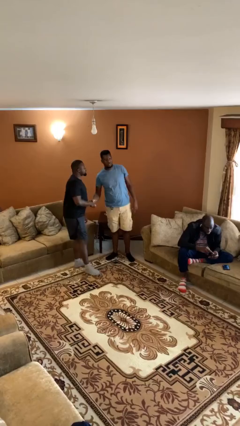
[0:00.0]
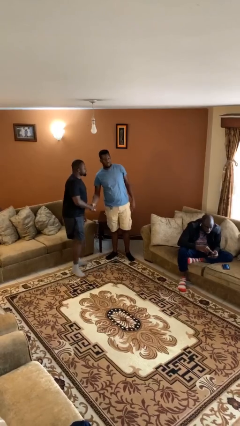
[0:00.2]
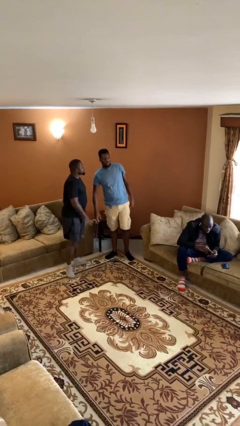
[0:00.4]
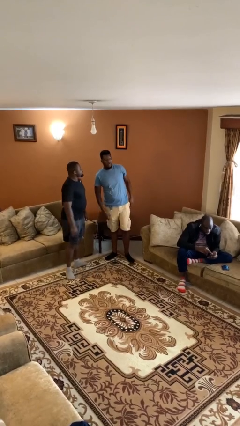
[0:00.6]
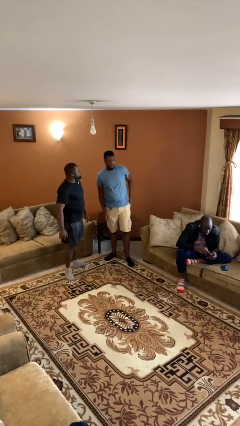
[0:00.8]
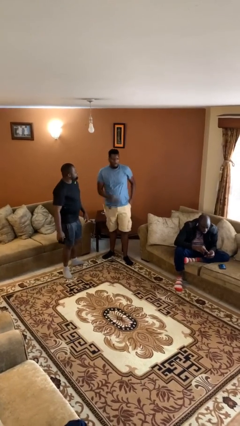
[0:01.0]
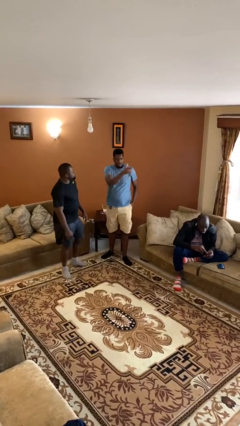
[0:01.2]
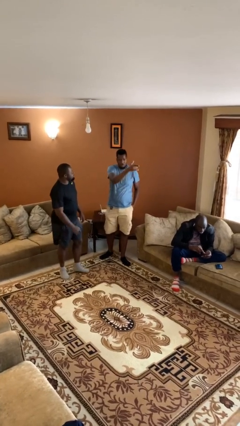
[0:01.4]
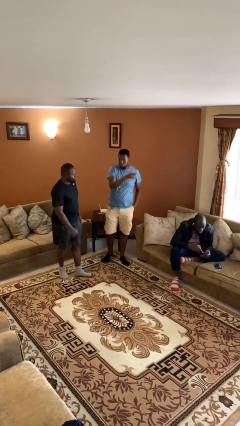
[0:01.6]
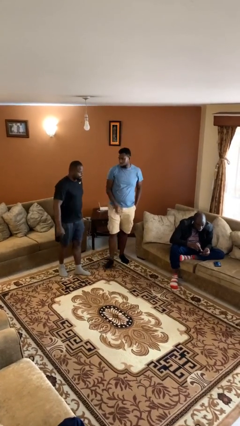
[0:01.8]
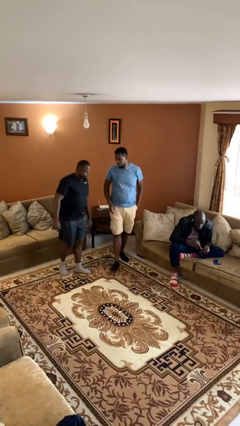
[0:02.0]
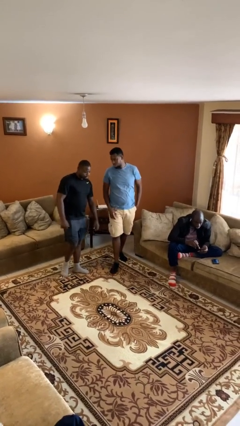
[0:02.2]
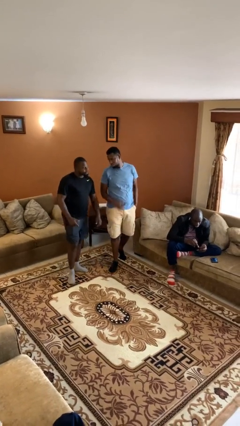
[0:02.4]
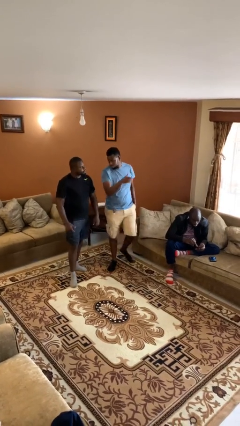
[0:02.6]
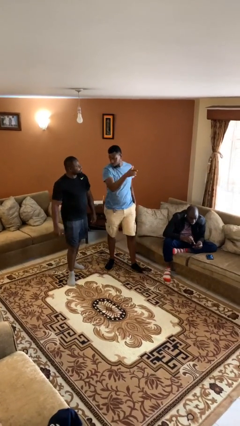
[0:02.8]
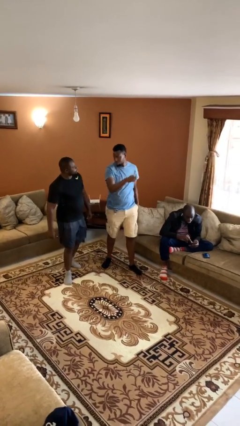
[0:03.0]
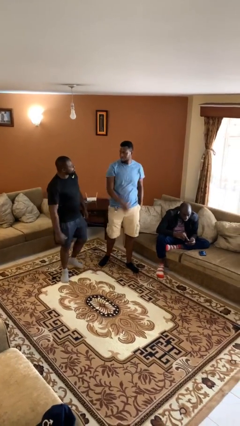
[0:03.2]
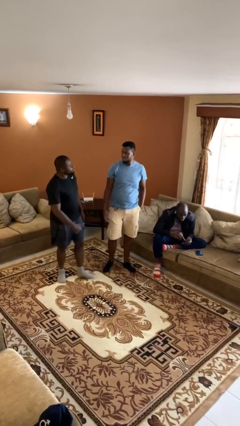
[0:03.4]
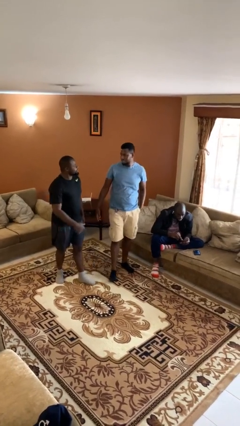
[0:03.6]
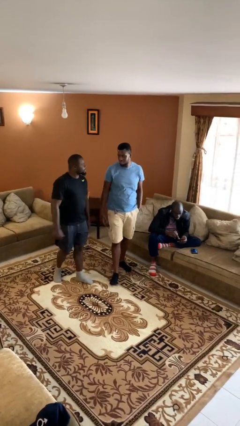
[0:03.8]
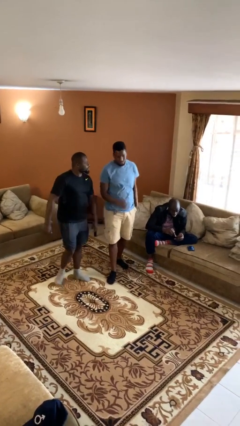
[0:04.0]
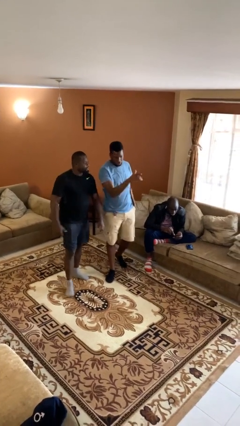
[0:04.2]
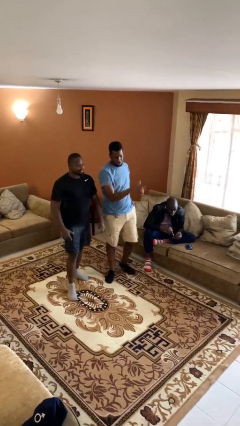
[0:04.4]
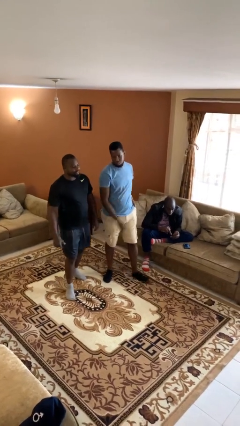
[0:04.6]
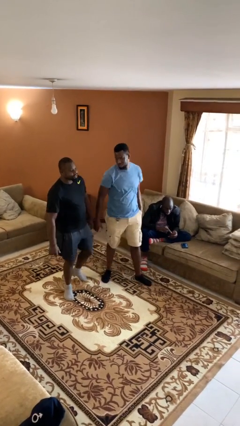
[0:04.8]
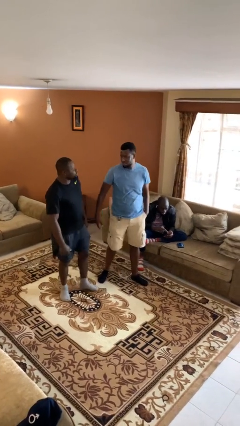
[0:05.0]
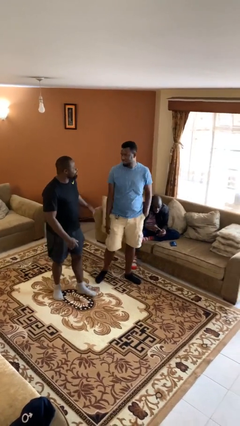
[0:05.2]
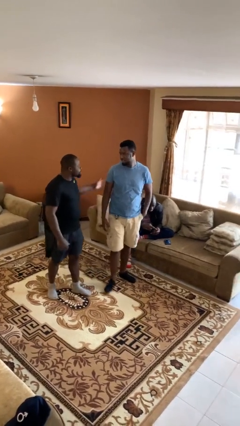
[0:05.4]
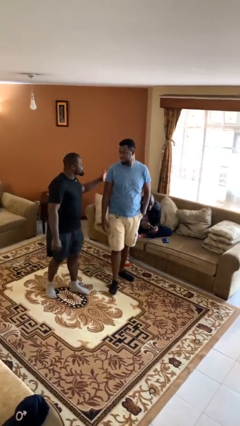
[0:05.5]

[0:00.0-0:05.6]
person talks to person

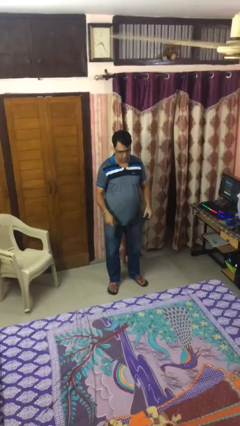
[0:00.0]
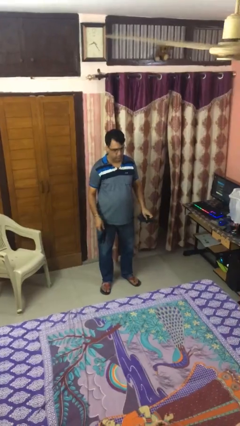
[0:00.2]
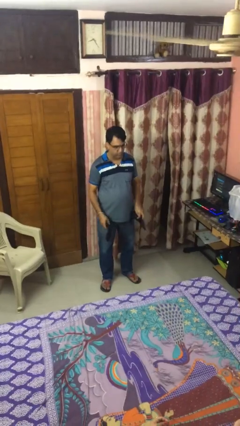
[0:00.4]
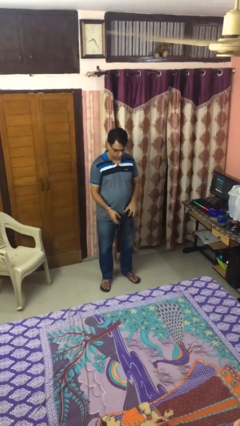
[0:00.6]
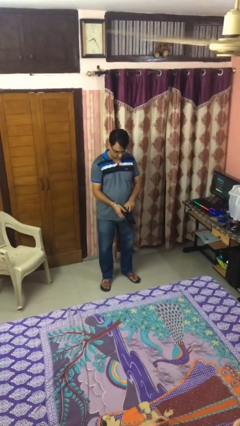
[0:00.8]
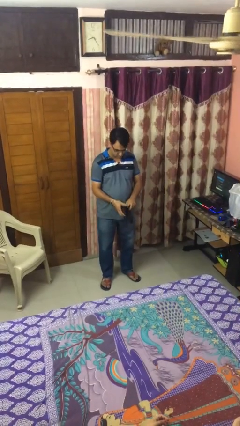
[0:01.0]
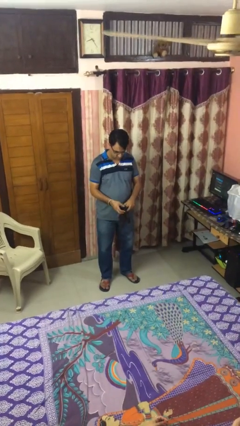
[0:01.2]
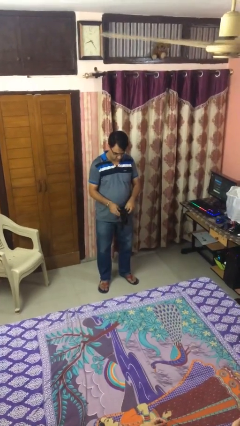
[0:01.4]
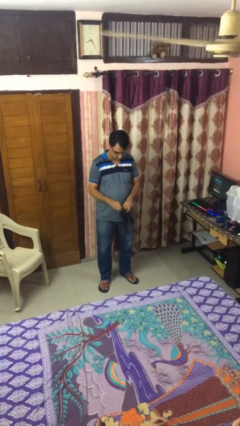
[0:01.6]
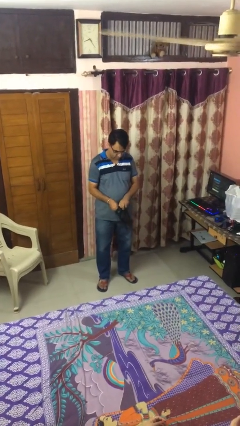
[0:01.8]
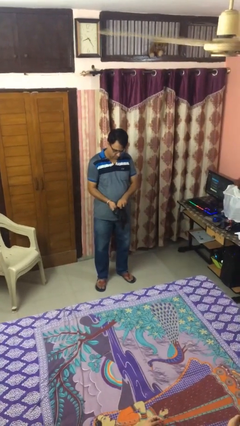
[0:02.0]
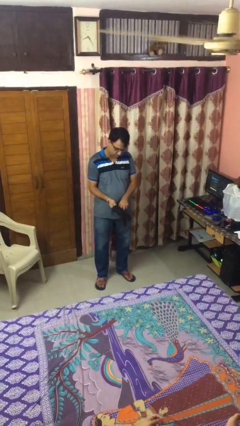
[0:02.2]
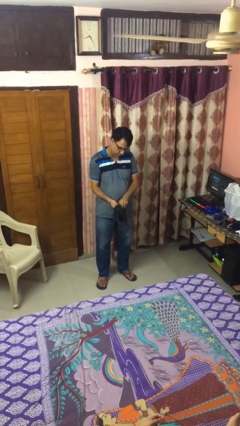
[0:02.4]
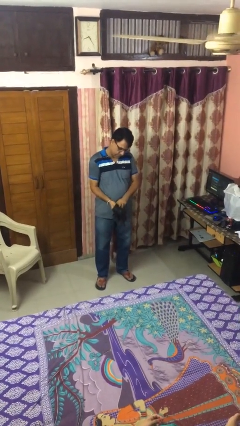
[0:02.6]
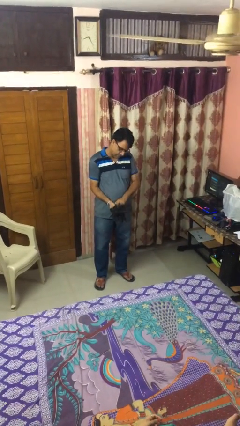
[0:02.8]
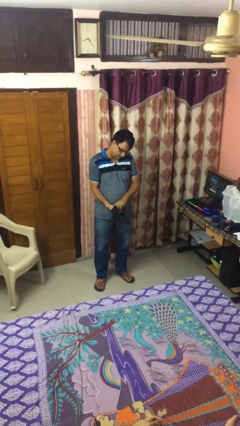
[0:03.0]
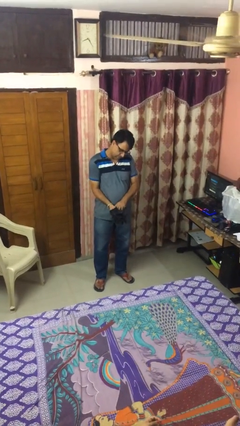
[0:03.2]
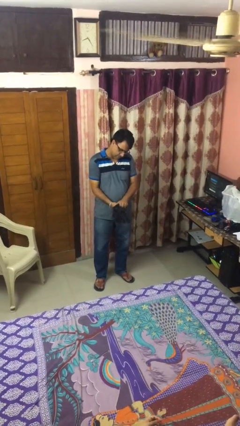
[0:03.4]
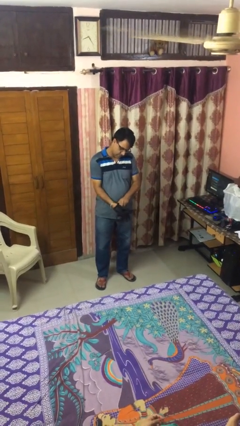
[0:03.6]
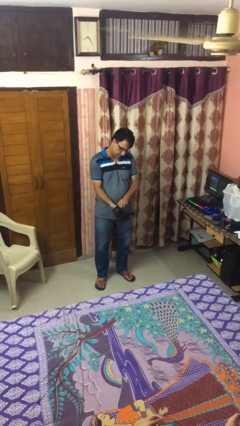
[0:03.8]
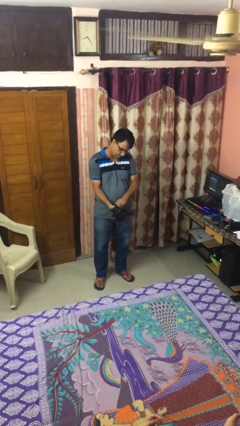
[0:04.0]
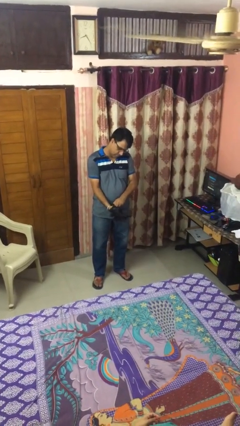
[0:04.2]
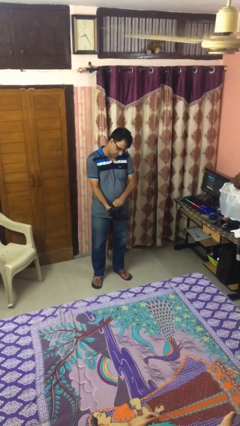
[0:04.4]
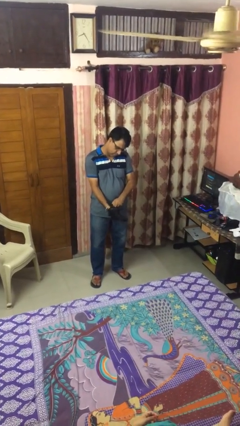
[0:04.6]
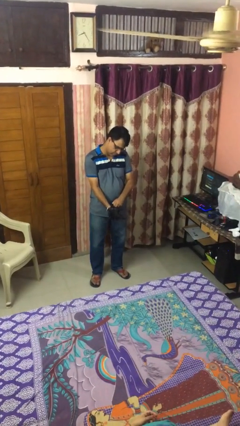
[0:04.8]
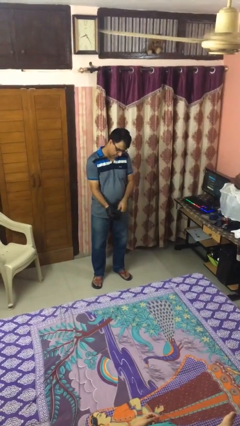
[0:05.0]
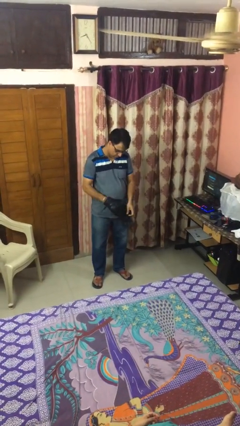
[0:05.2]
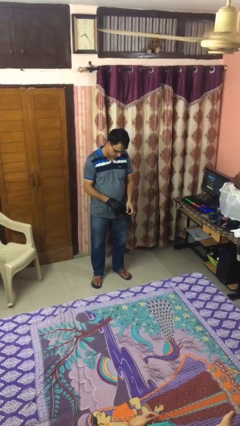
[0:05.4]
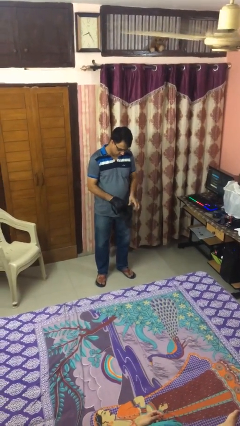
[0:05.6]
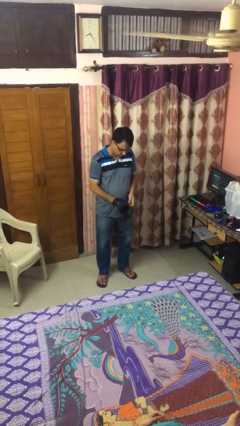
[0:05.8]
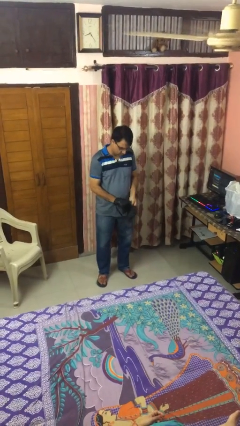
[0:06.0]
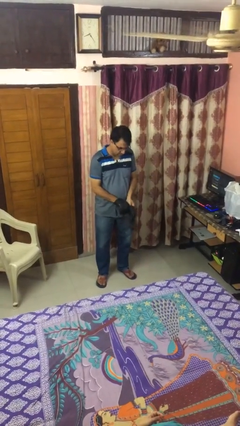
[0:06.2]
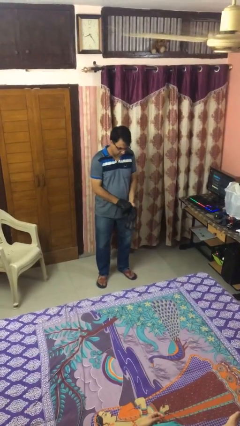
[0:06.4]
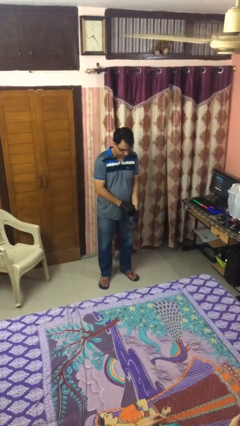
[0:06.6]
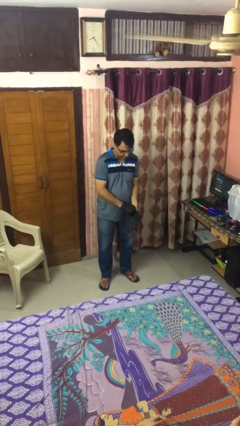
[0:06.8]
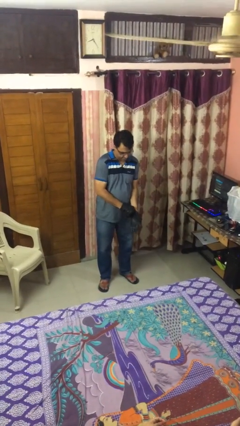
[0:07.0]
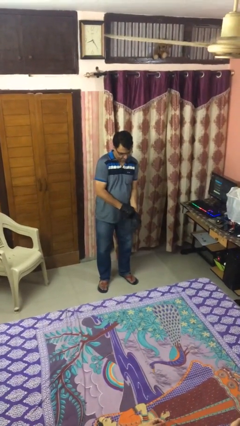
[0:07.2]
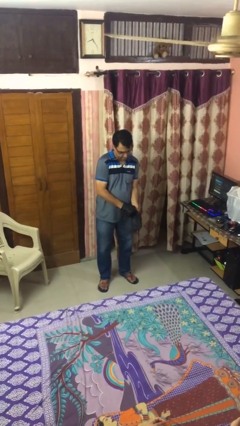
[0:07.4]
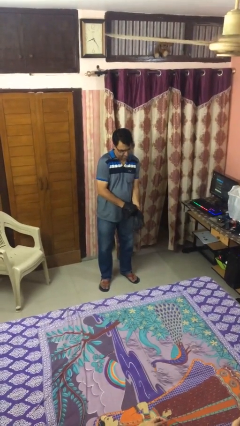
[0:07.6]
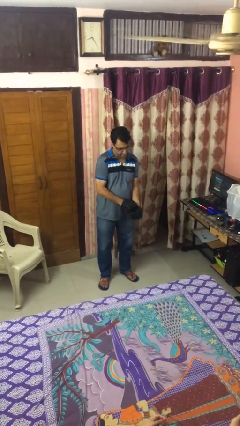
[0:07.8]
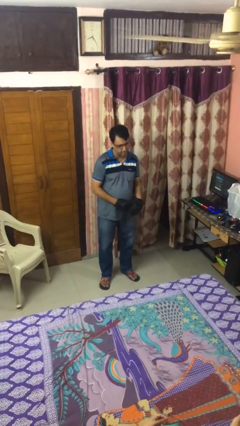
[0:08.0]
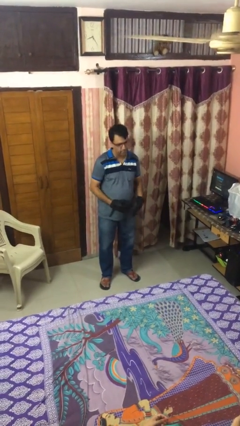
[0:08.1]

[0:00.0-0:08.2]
person puts on gloves

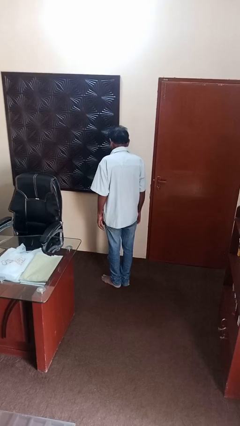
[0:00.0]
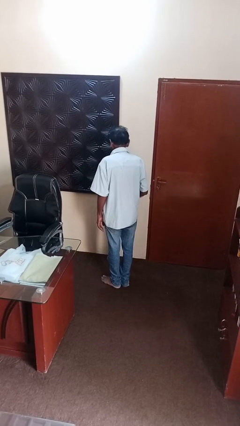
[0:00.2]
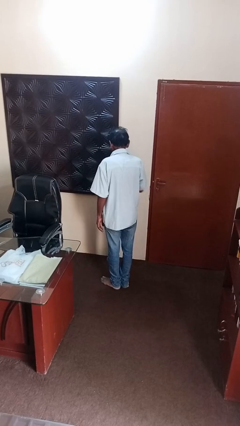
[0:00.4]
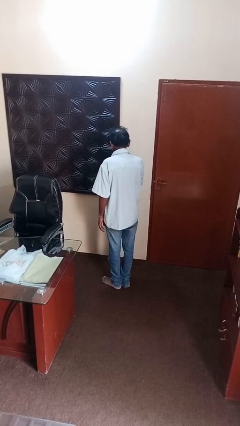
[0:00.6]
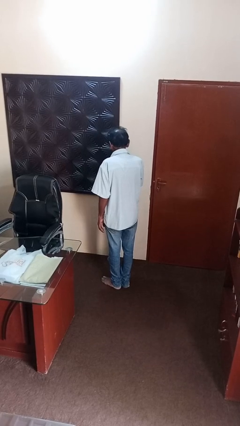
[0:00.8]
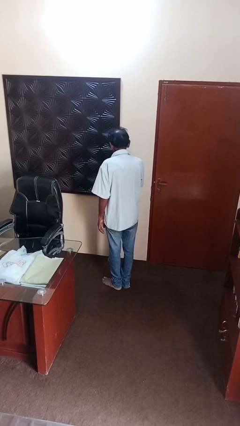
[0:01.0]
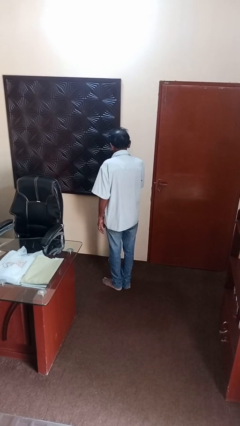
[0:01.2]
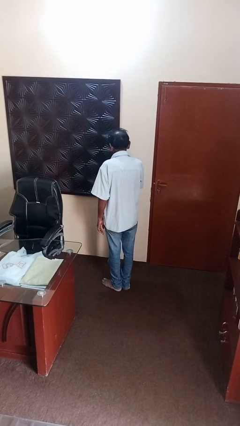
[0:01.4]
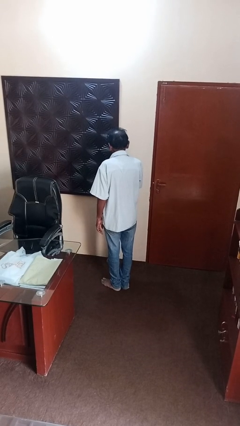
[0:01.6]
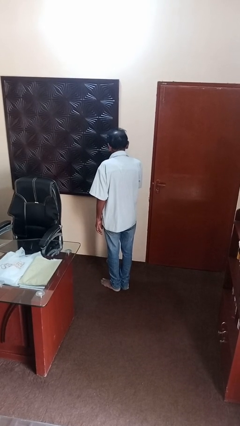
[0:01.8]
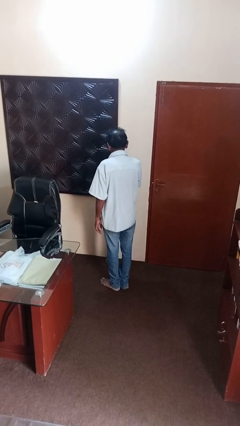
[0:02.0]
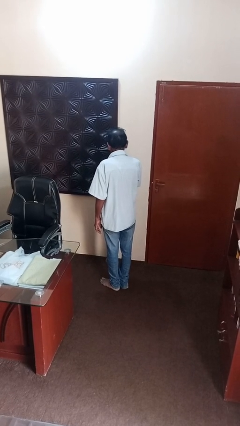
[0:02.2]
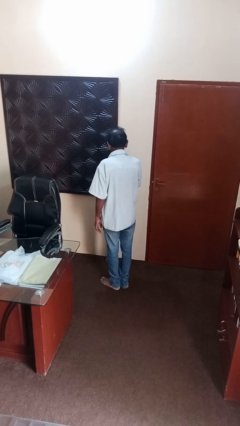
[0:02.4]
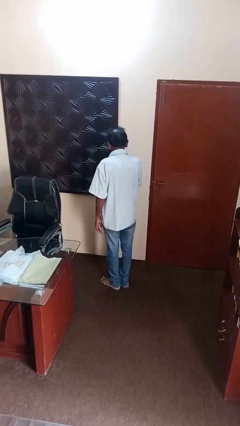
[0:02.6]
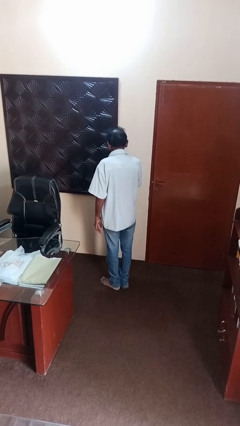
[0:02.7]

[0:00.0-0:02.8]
person licks fingers

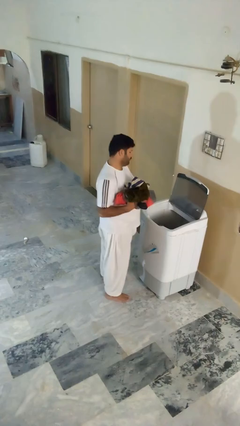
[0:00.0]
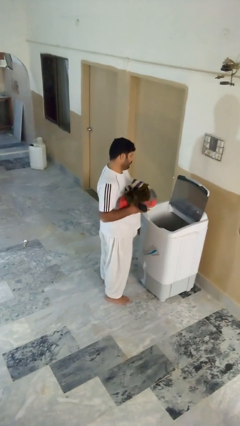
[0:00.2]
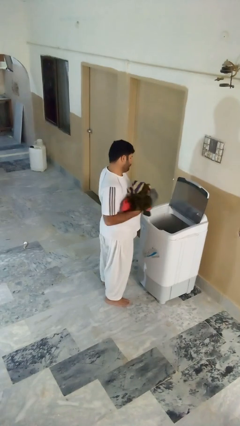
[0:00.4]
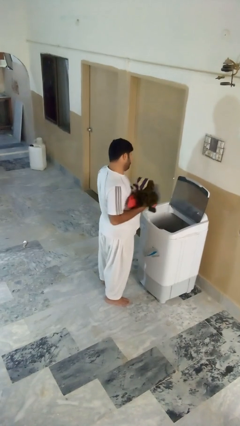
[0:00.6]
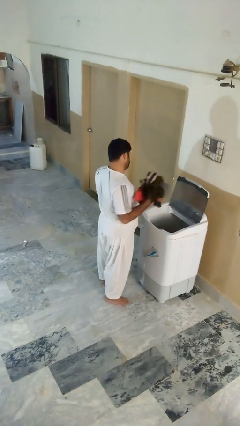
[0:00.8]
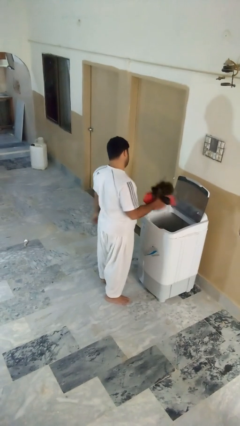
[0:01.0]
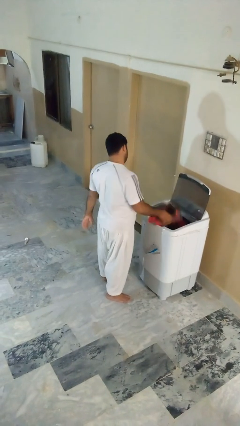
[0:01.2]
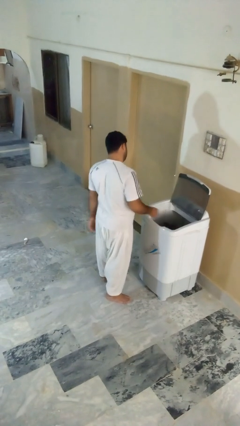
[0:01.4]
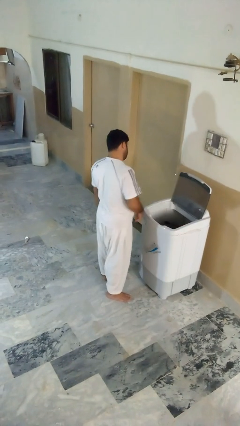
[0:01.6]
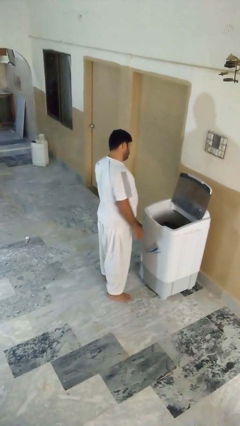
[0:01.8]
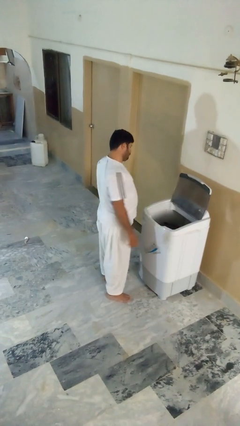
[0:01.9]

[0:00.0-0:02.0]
person loads clotheswasher
